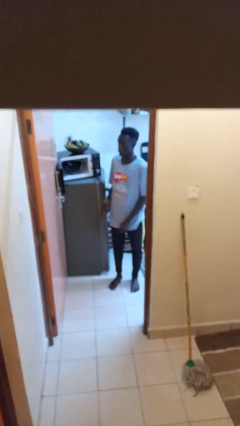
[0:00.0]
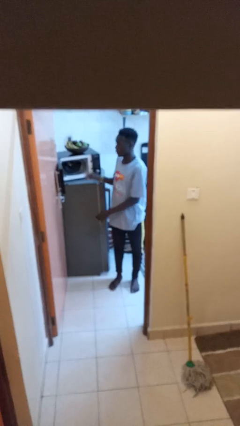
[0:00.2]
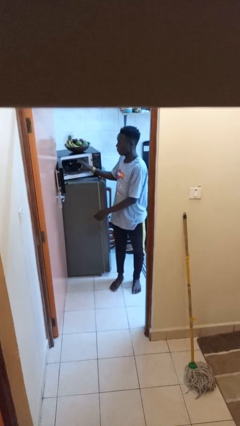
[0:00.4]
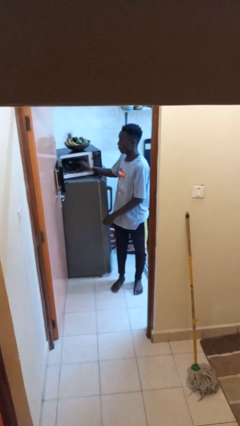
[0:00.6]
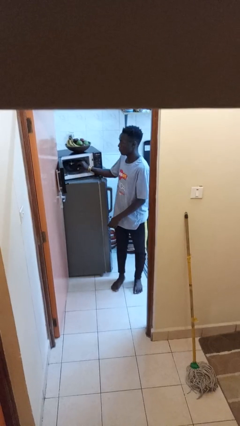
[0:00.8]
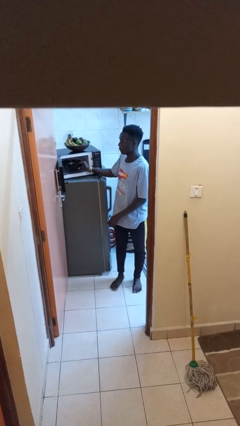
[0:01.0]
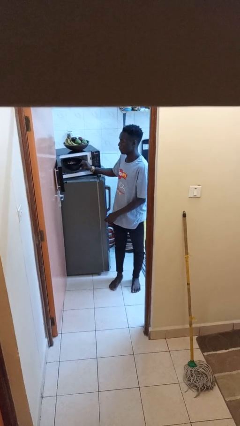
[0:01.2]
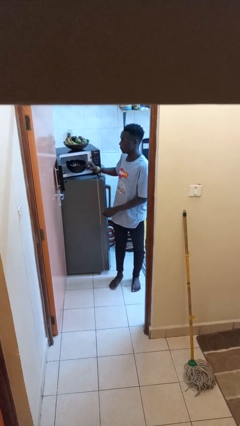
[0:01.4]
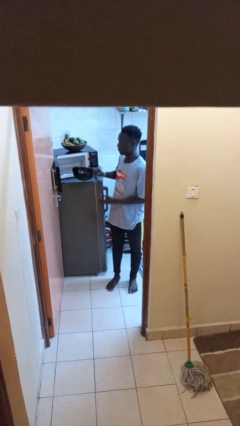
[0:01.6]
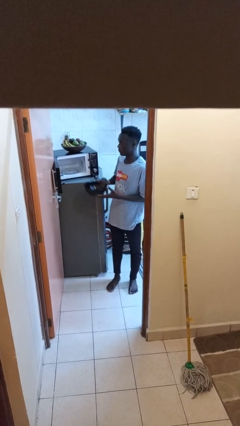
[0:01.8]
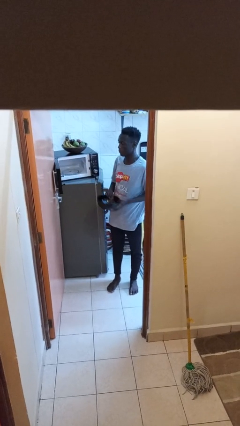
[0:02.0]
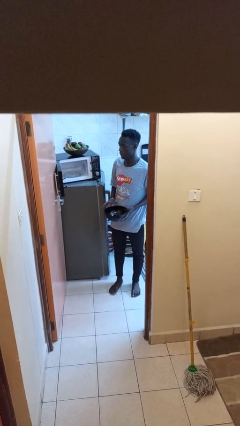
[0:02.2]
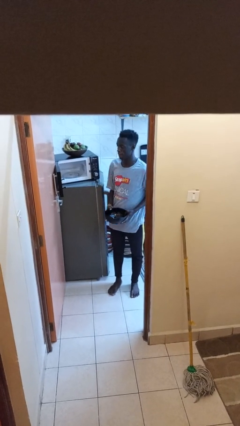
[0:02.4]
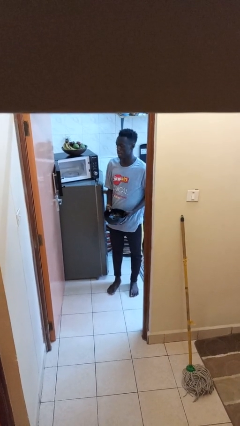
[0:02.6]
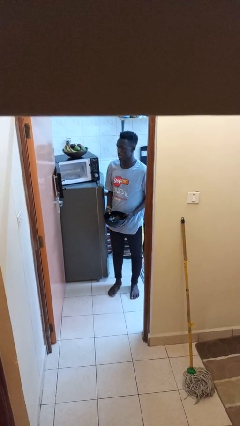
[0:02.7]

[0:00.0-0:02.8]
person takes object from microwave

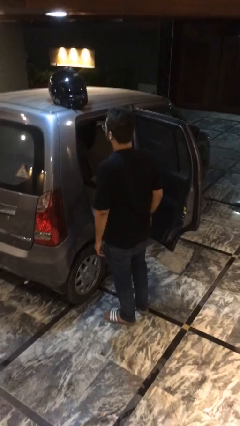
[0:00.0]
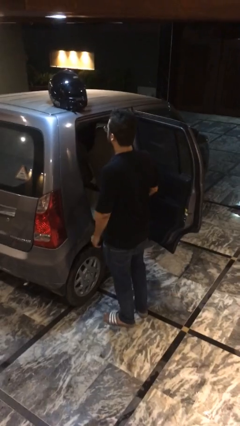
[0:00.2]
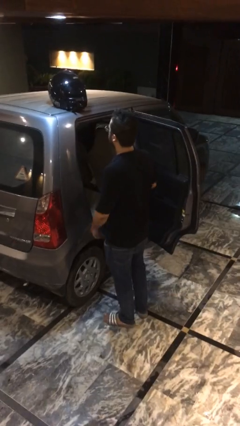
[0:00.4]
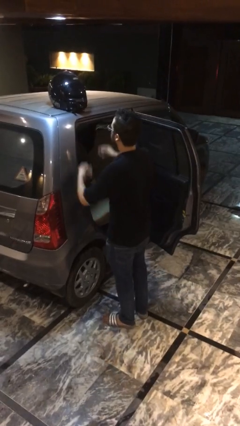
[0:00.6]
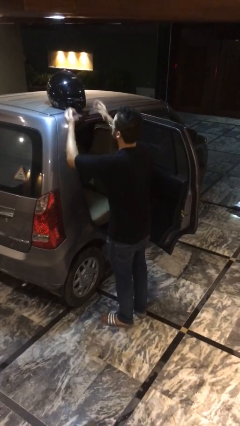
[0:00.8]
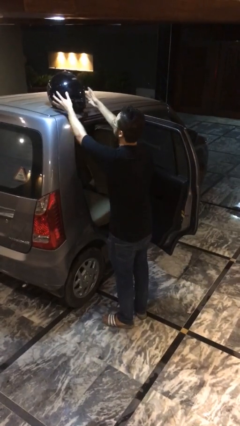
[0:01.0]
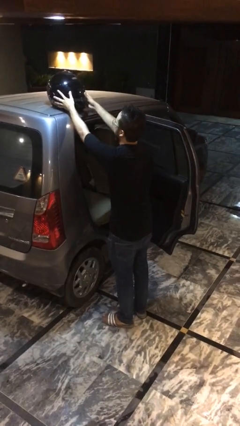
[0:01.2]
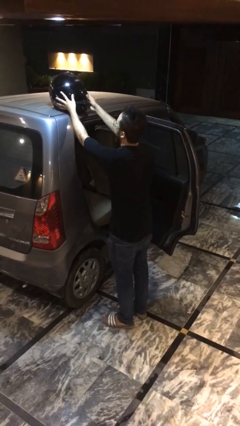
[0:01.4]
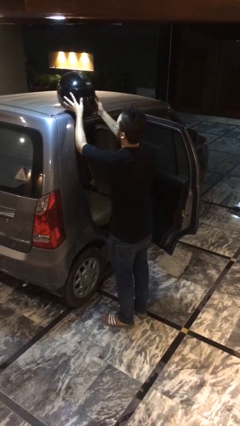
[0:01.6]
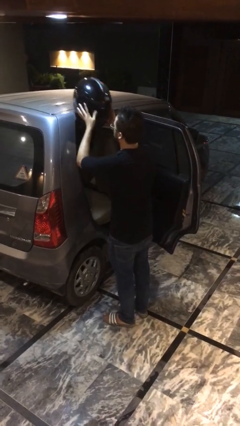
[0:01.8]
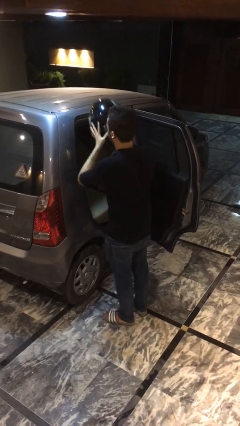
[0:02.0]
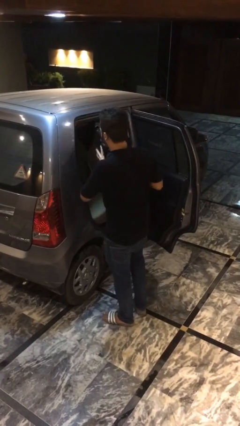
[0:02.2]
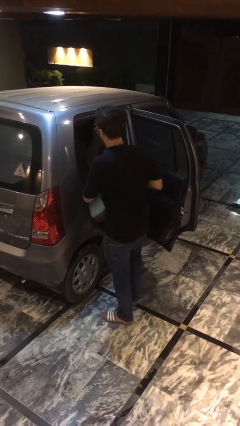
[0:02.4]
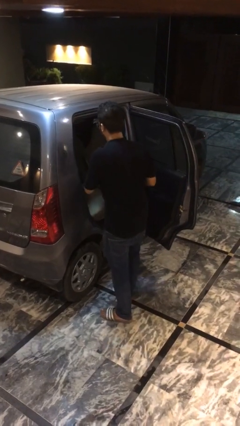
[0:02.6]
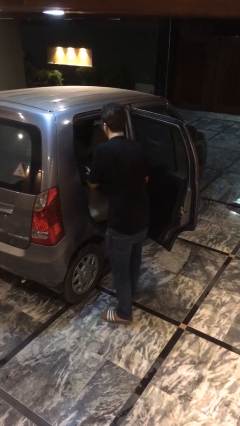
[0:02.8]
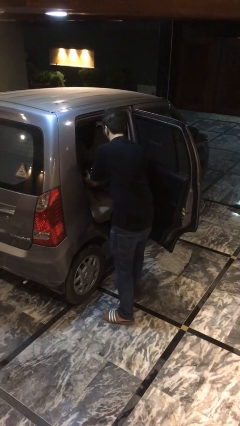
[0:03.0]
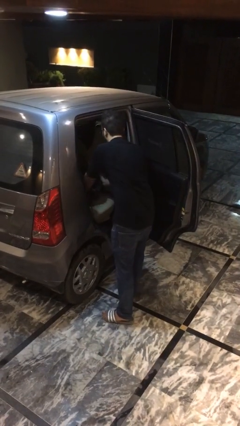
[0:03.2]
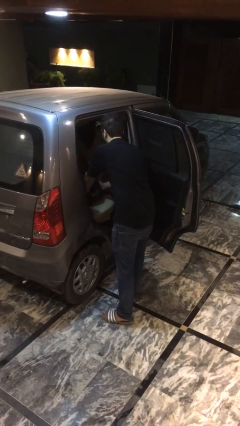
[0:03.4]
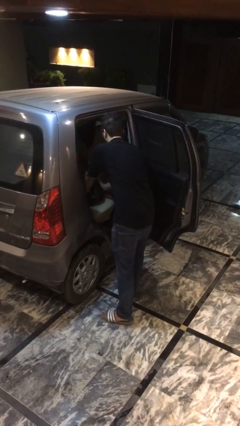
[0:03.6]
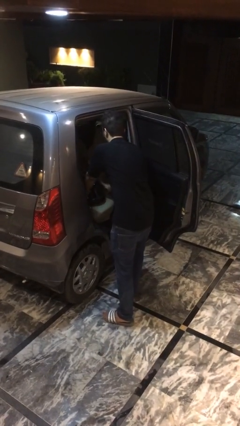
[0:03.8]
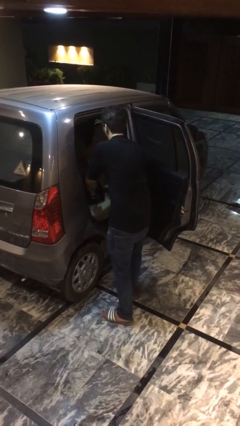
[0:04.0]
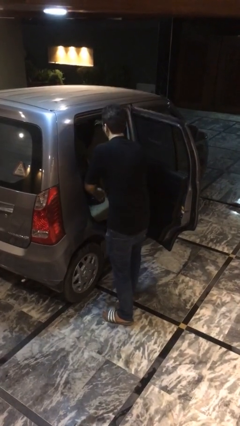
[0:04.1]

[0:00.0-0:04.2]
person loads car

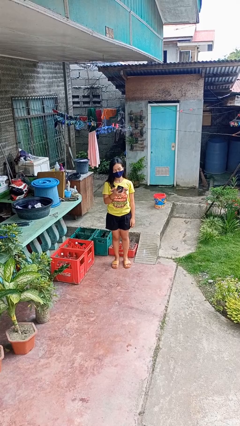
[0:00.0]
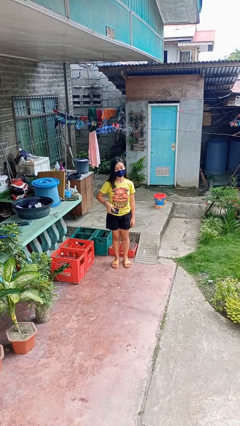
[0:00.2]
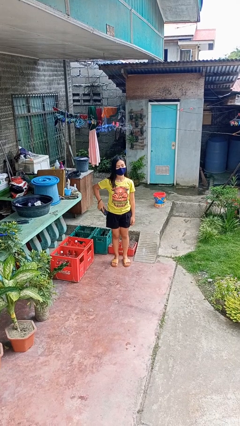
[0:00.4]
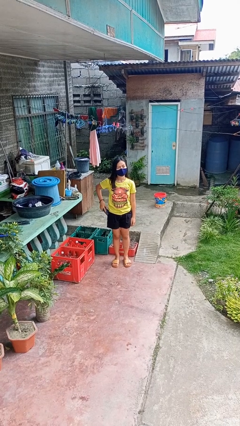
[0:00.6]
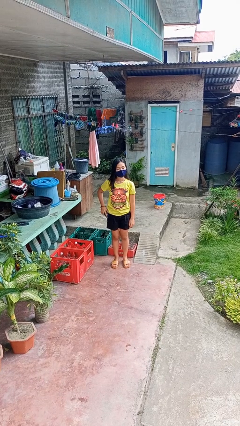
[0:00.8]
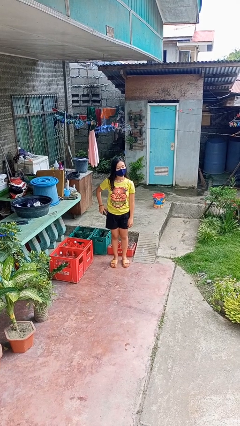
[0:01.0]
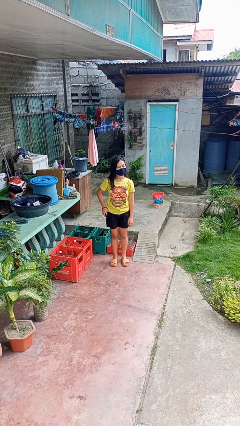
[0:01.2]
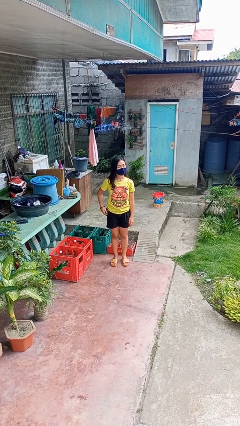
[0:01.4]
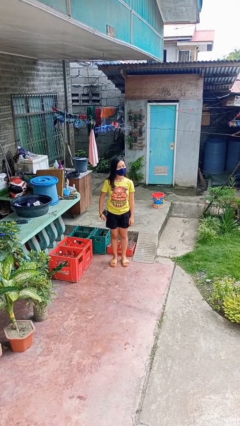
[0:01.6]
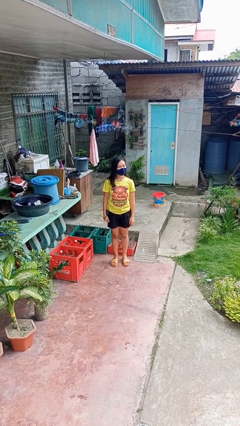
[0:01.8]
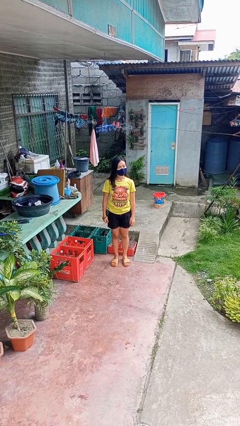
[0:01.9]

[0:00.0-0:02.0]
person puts phone into pocket

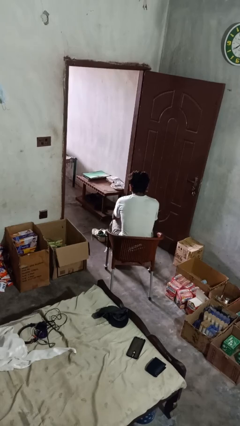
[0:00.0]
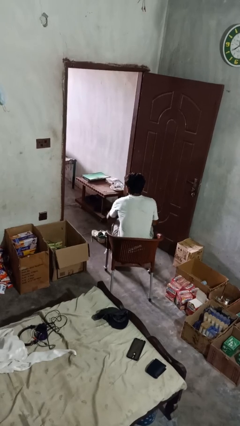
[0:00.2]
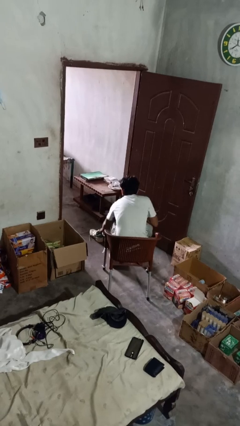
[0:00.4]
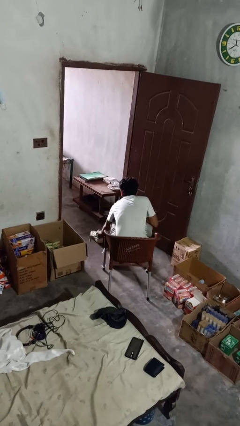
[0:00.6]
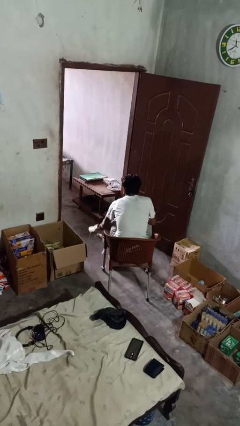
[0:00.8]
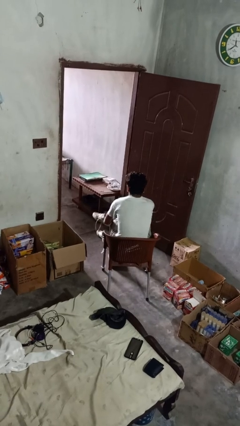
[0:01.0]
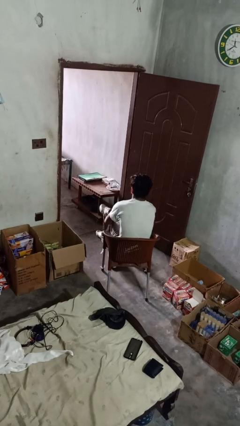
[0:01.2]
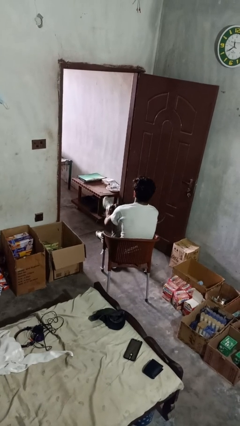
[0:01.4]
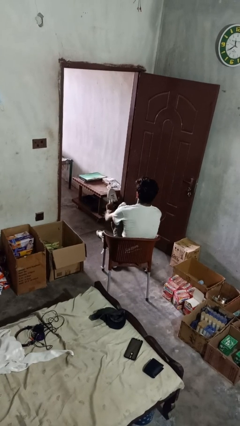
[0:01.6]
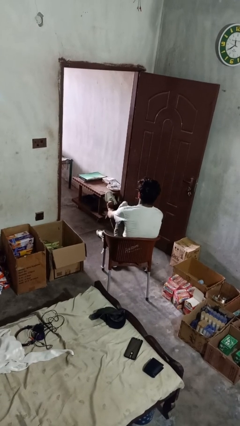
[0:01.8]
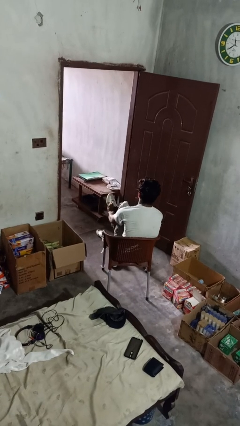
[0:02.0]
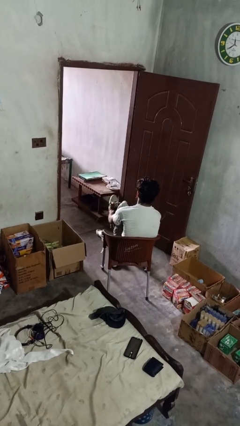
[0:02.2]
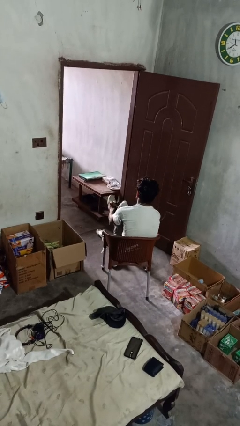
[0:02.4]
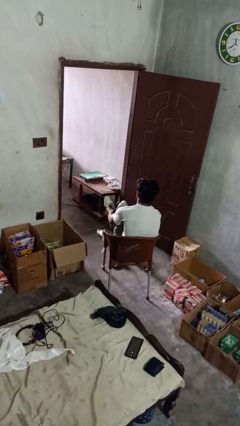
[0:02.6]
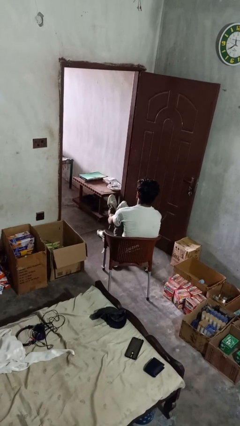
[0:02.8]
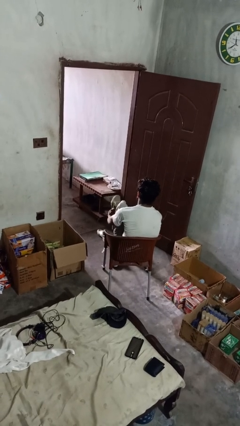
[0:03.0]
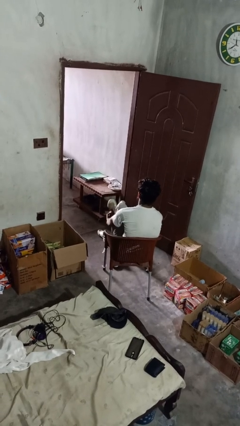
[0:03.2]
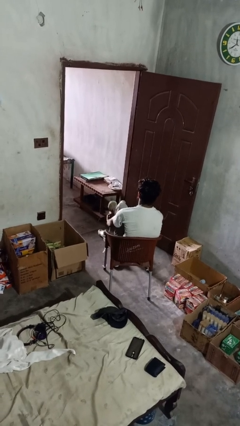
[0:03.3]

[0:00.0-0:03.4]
person puts on shoes

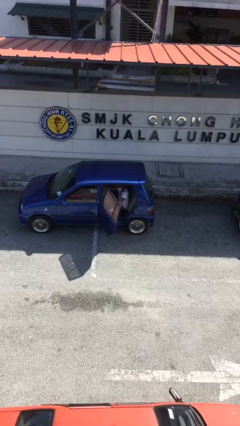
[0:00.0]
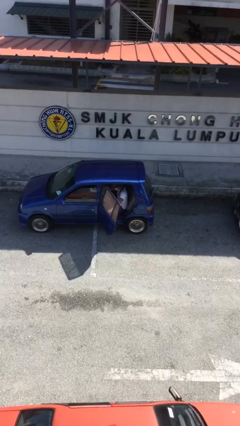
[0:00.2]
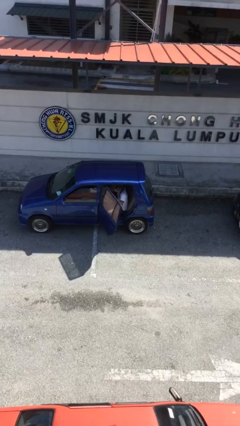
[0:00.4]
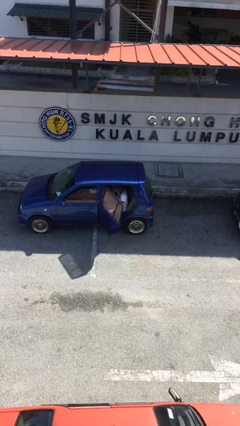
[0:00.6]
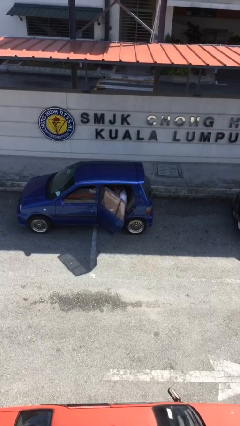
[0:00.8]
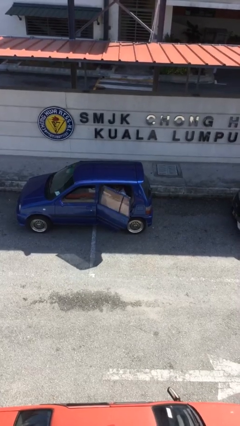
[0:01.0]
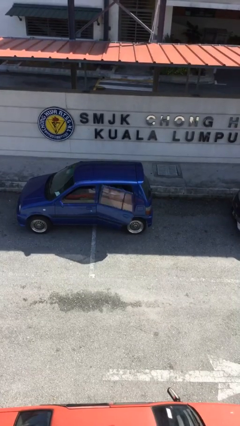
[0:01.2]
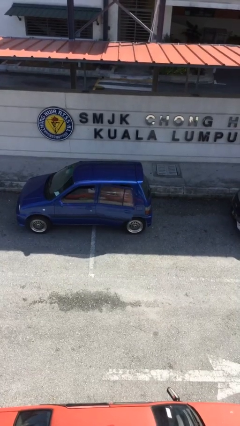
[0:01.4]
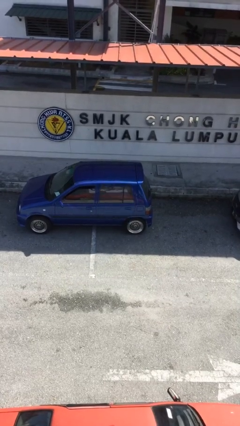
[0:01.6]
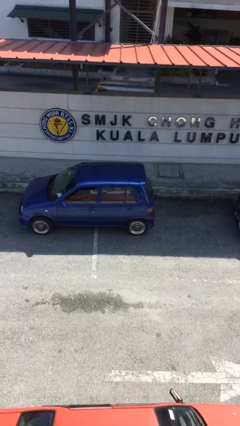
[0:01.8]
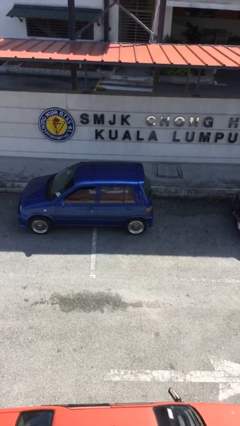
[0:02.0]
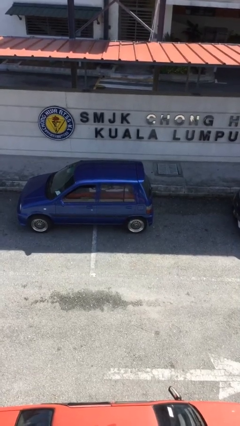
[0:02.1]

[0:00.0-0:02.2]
person closes car door

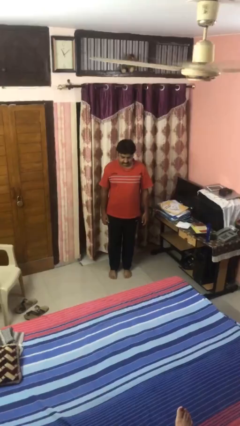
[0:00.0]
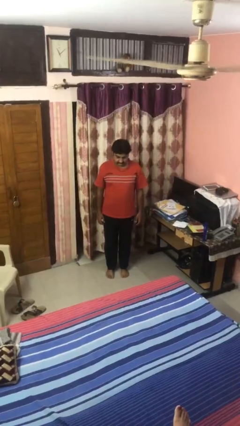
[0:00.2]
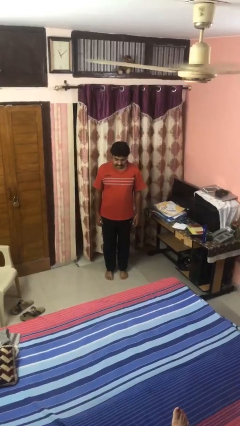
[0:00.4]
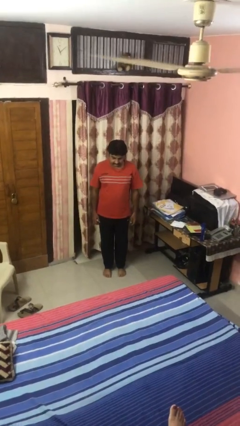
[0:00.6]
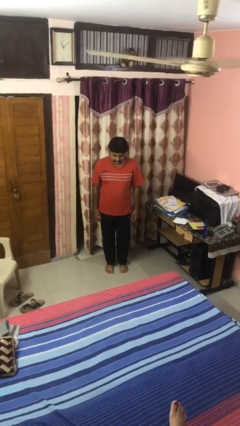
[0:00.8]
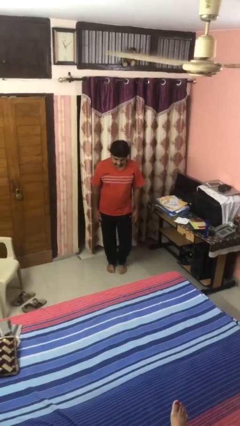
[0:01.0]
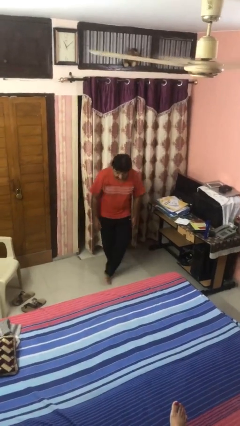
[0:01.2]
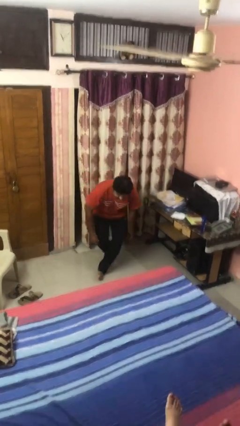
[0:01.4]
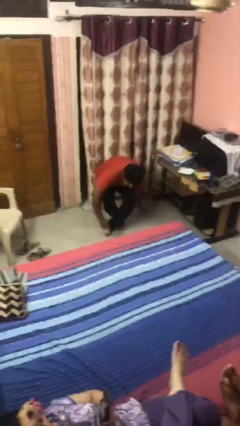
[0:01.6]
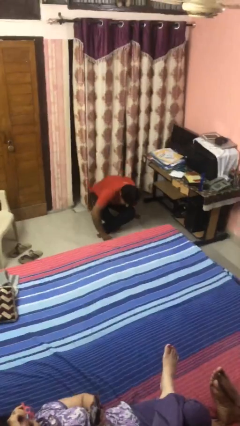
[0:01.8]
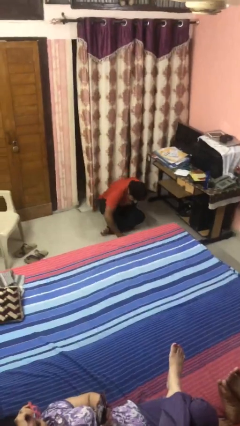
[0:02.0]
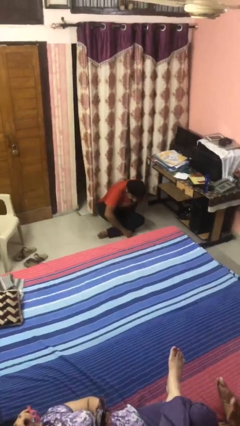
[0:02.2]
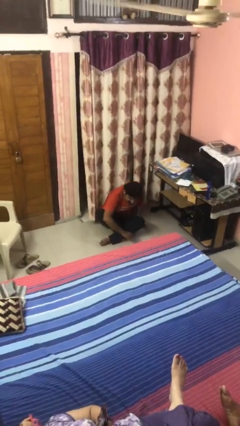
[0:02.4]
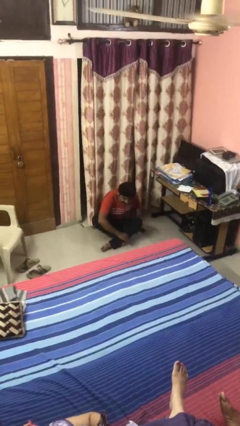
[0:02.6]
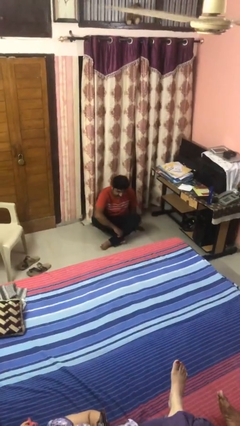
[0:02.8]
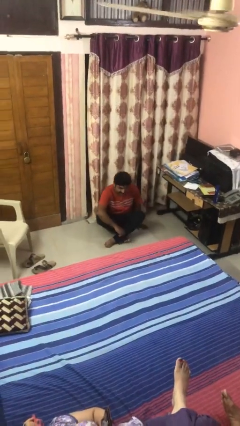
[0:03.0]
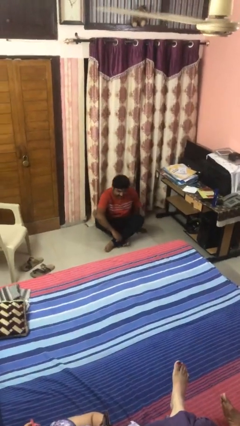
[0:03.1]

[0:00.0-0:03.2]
person sits crisscross
